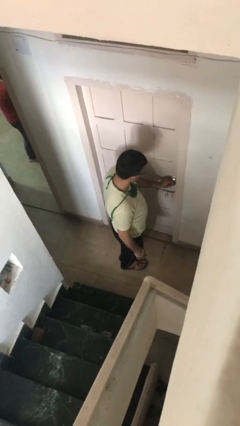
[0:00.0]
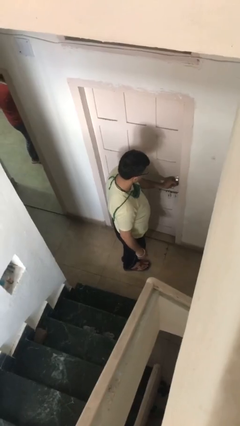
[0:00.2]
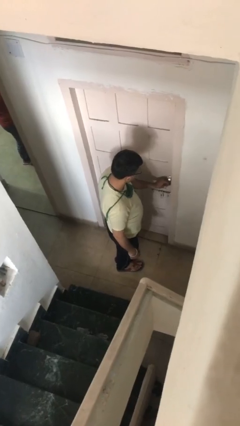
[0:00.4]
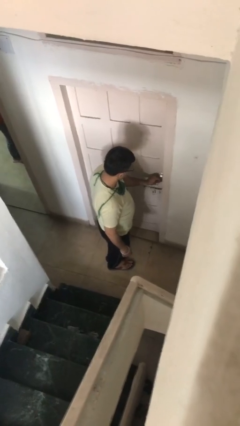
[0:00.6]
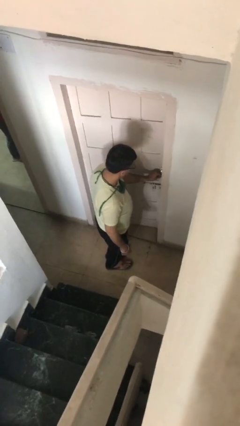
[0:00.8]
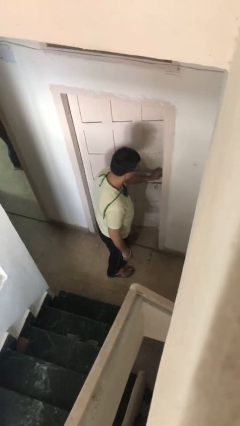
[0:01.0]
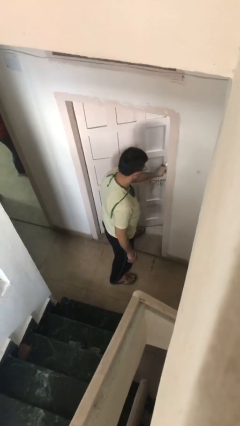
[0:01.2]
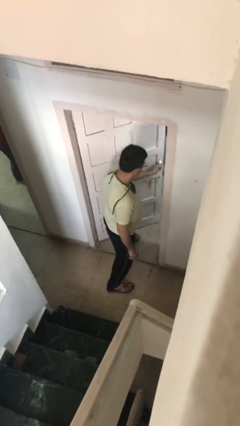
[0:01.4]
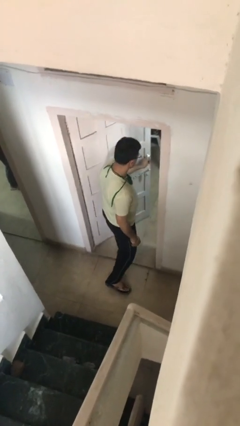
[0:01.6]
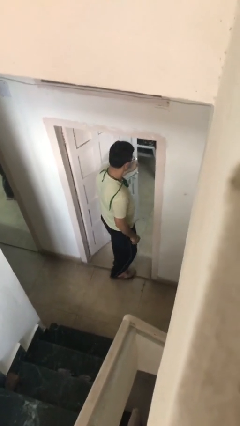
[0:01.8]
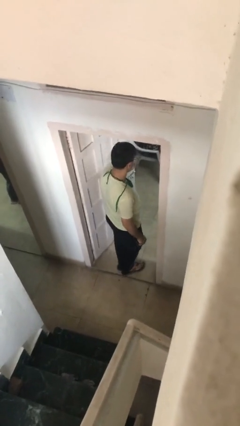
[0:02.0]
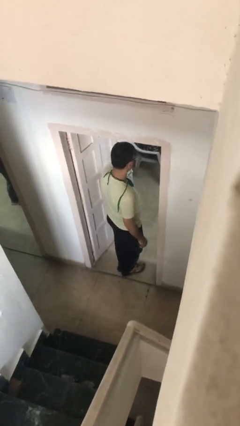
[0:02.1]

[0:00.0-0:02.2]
person opens facility door

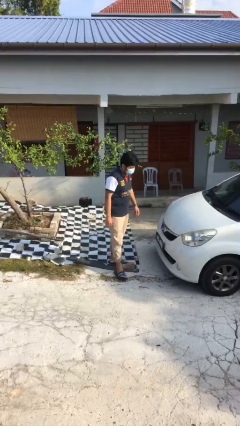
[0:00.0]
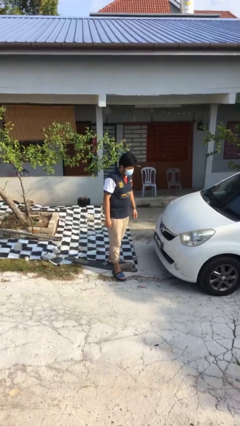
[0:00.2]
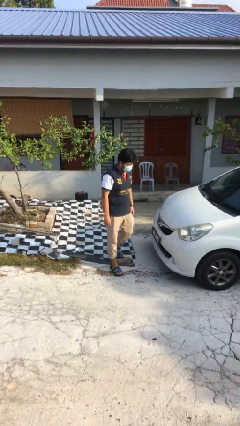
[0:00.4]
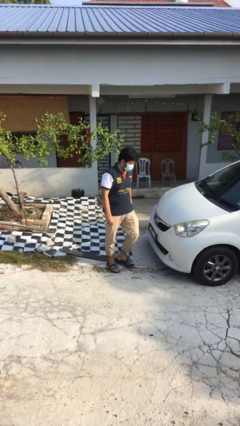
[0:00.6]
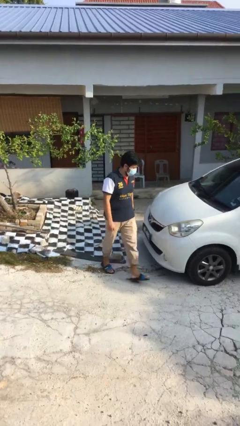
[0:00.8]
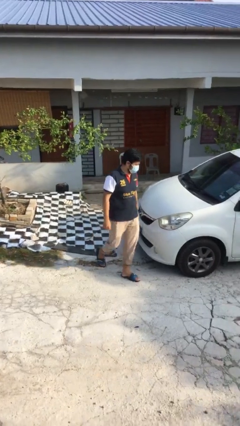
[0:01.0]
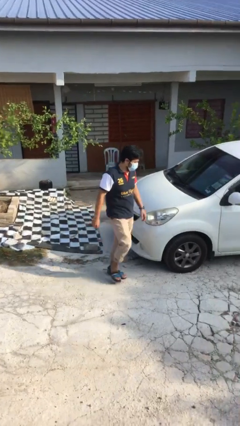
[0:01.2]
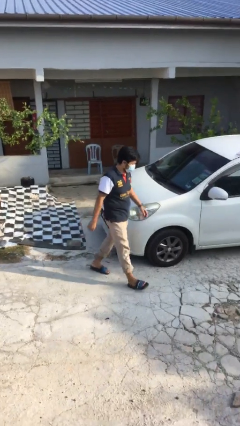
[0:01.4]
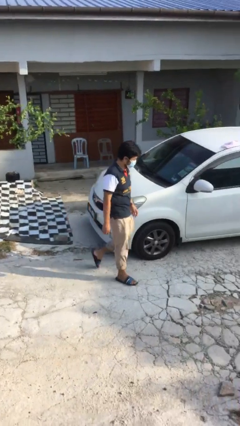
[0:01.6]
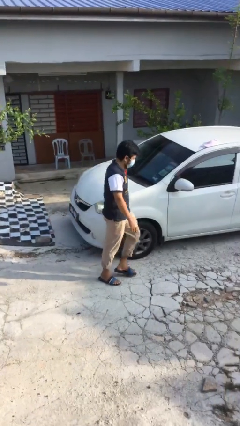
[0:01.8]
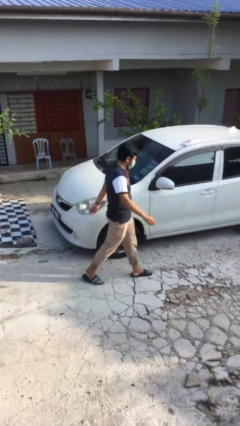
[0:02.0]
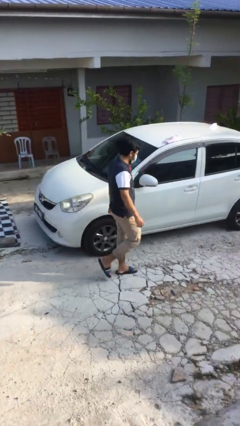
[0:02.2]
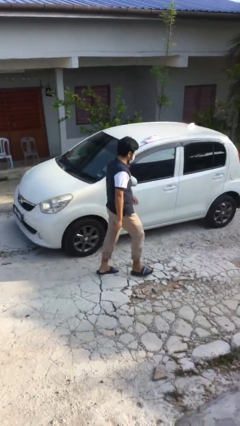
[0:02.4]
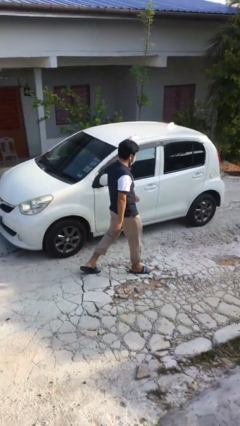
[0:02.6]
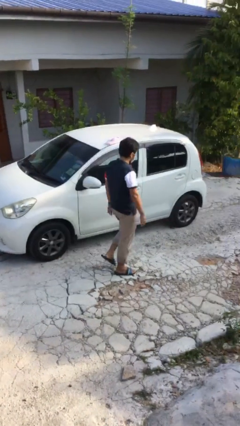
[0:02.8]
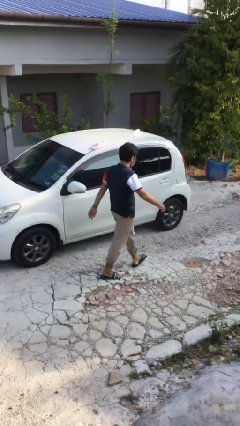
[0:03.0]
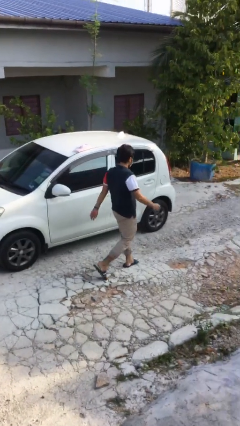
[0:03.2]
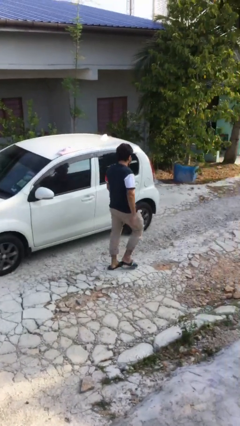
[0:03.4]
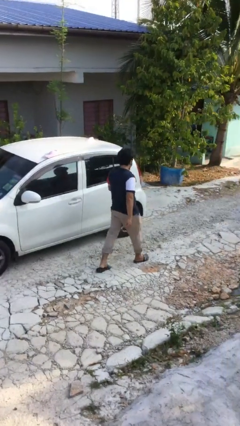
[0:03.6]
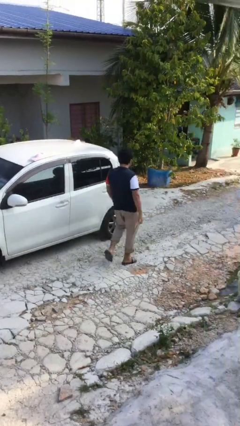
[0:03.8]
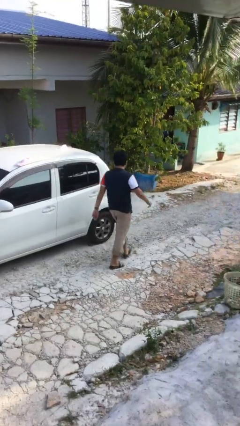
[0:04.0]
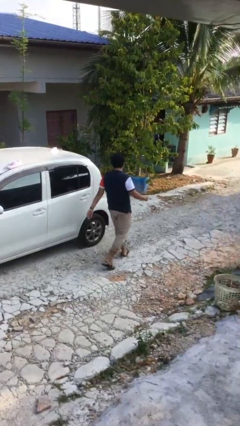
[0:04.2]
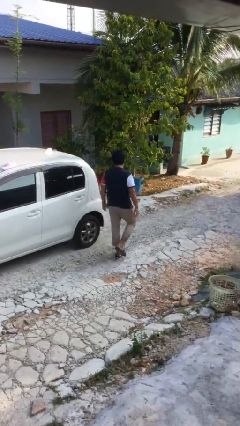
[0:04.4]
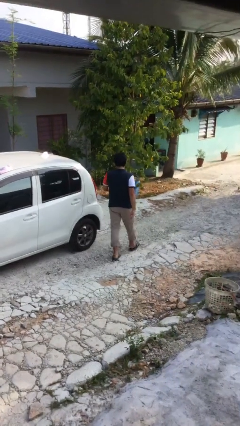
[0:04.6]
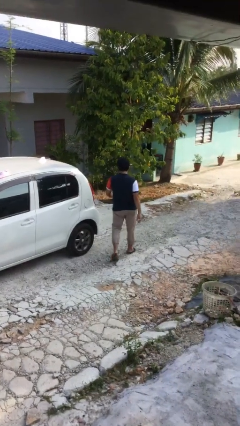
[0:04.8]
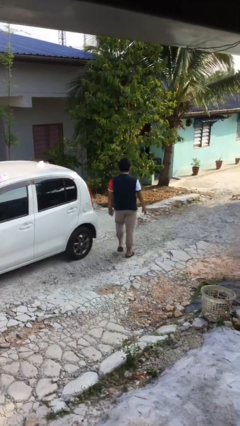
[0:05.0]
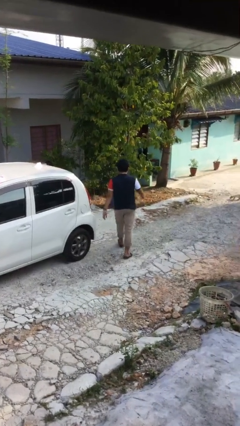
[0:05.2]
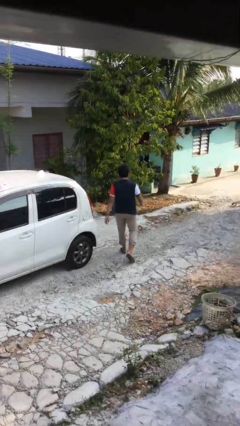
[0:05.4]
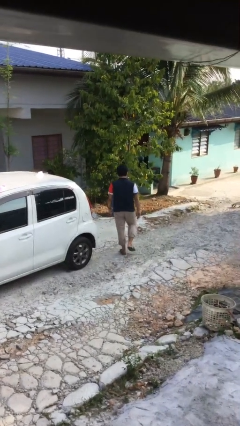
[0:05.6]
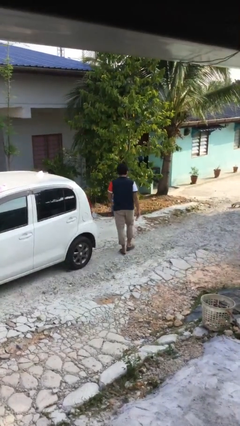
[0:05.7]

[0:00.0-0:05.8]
person walks around car

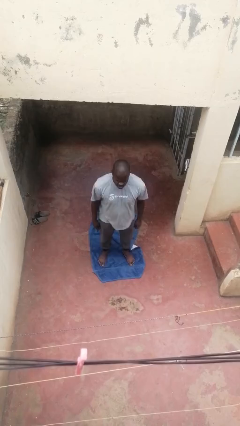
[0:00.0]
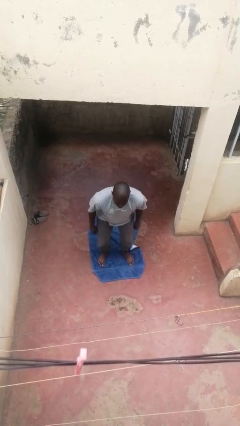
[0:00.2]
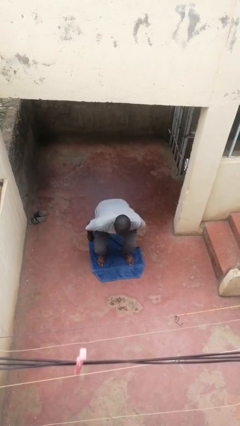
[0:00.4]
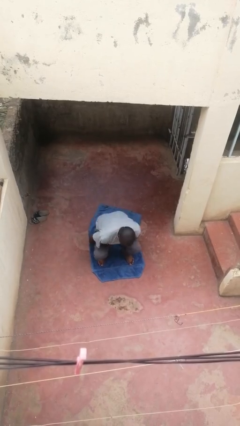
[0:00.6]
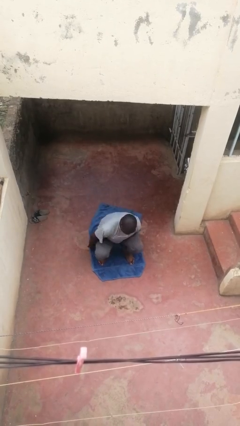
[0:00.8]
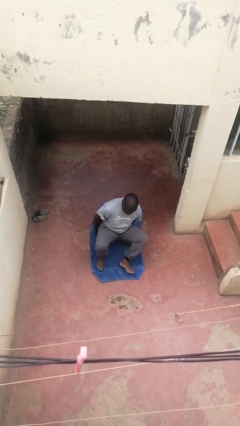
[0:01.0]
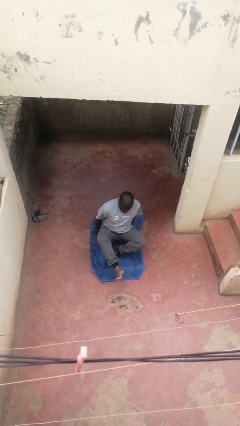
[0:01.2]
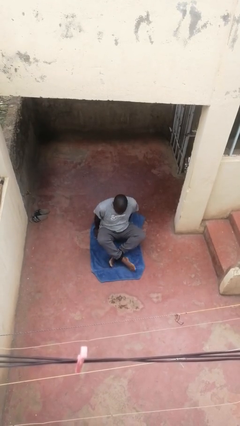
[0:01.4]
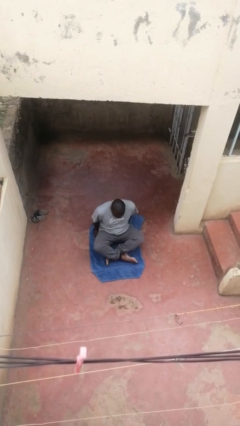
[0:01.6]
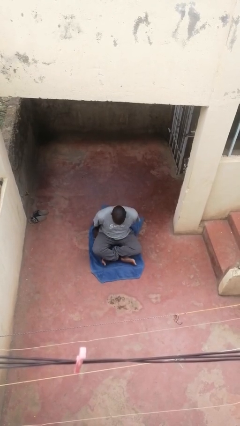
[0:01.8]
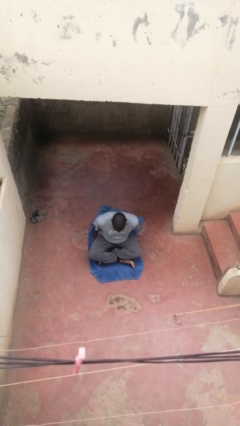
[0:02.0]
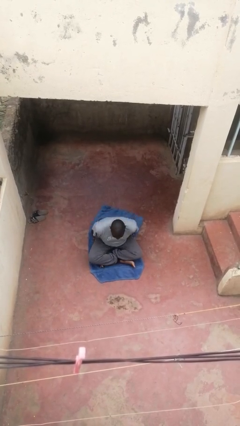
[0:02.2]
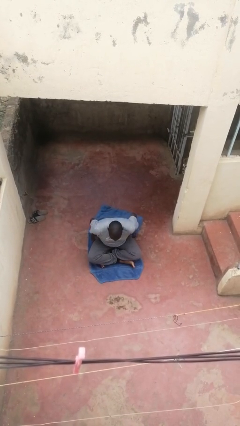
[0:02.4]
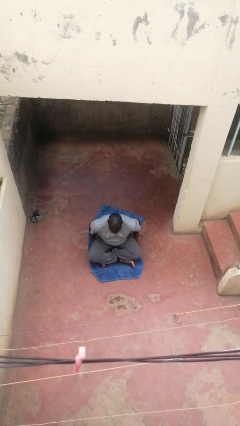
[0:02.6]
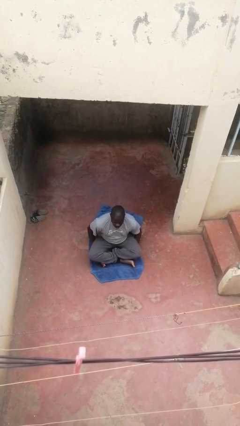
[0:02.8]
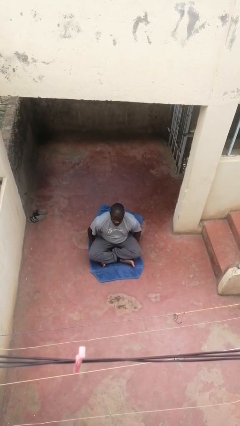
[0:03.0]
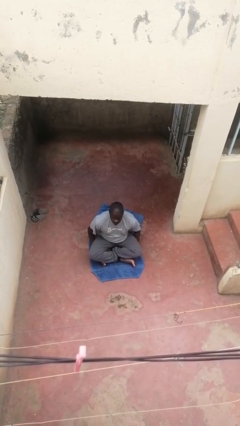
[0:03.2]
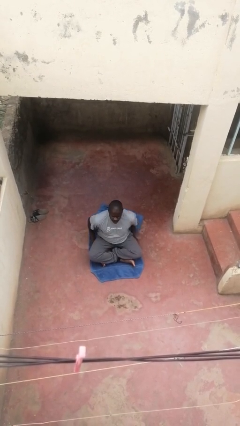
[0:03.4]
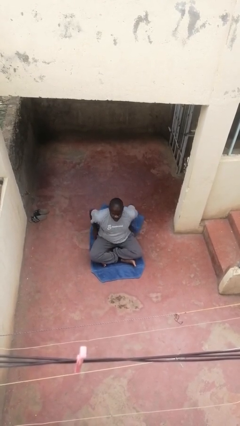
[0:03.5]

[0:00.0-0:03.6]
person sits crisscross

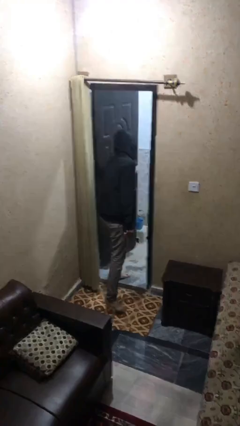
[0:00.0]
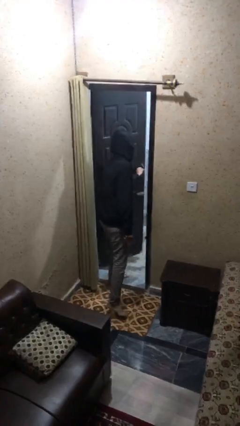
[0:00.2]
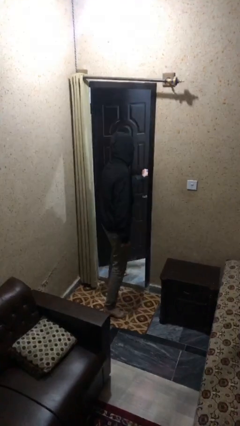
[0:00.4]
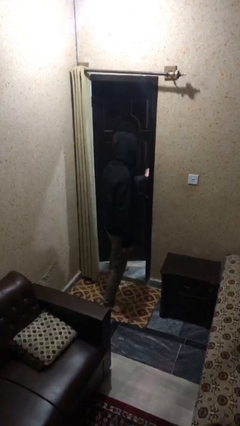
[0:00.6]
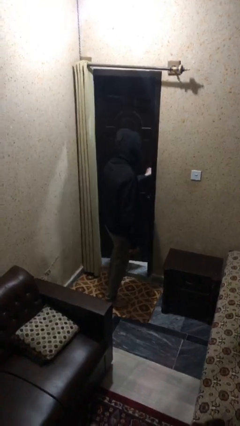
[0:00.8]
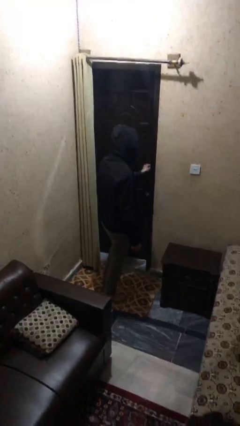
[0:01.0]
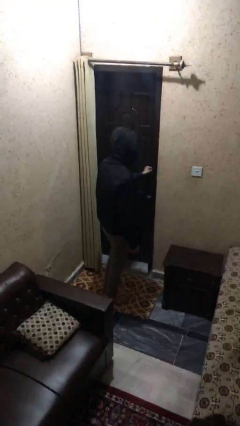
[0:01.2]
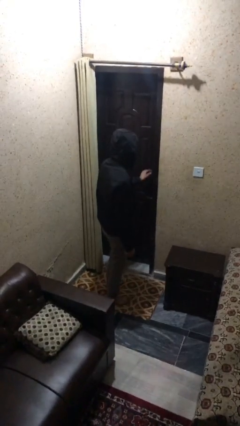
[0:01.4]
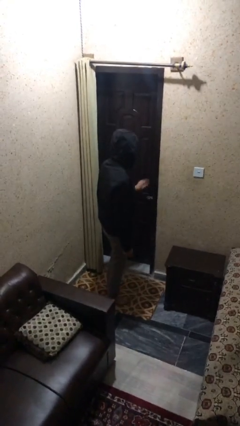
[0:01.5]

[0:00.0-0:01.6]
person closes facility door

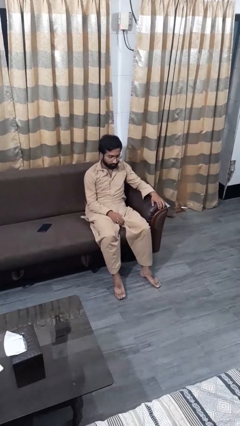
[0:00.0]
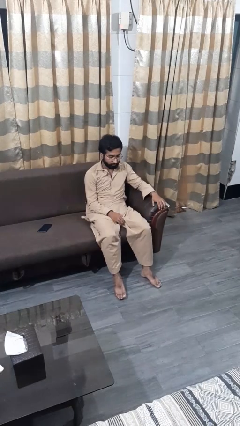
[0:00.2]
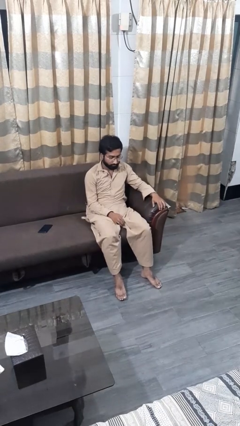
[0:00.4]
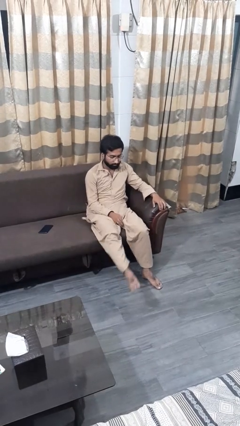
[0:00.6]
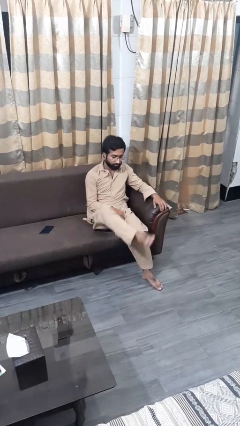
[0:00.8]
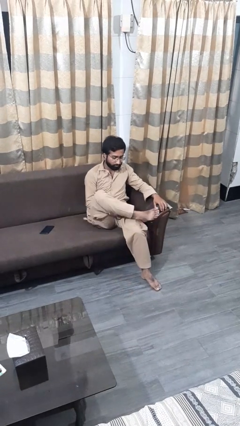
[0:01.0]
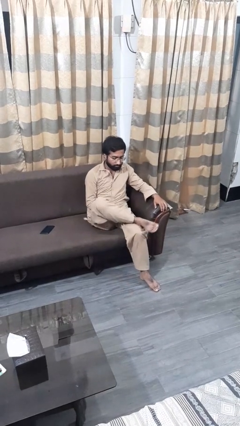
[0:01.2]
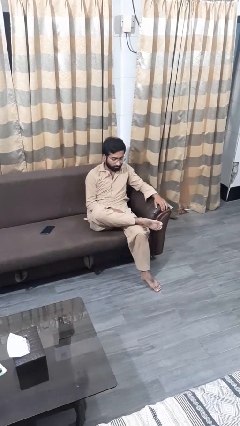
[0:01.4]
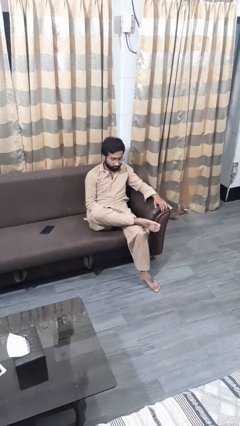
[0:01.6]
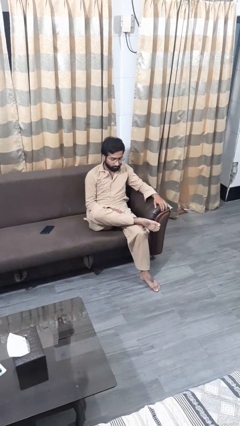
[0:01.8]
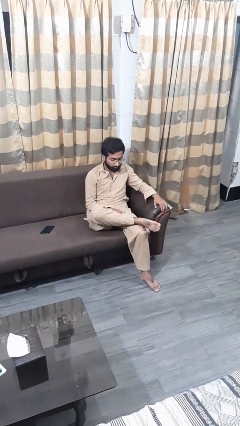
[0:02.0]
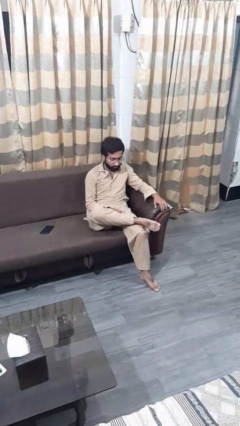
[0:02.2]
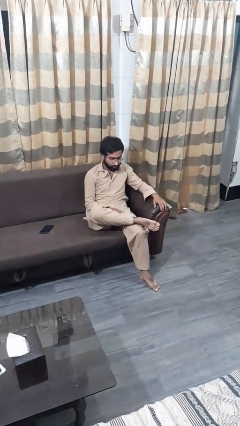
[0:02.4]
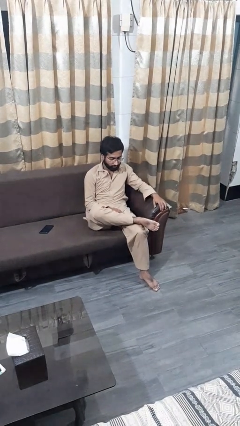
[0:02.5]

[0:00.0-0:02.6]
person crosses legs

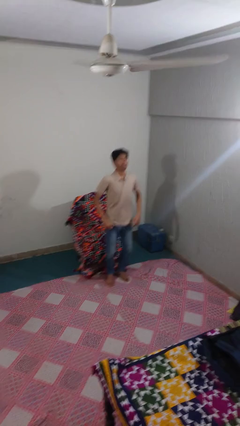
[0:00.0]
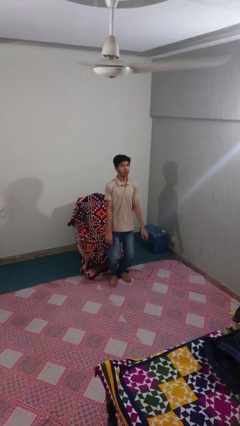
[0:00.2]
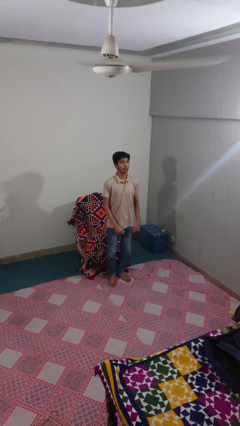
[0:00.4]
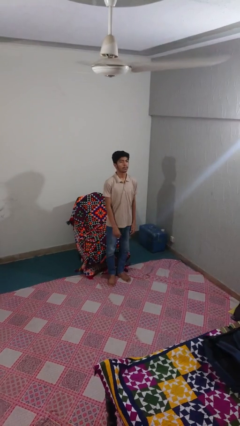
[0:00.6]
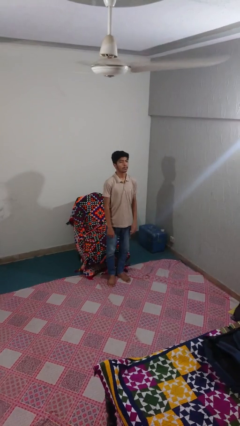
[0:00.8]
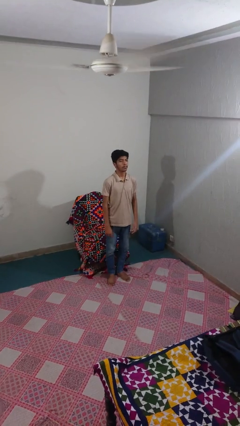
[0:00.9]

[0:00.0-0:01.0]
person jumps

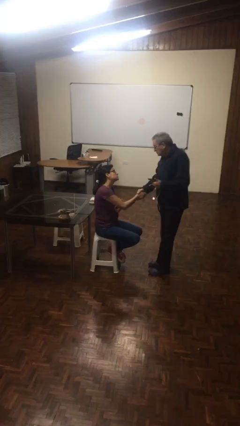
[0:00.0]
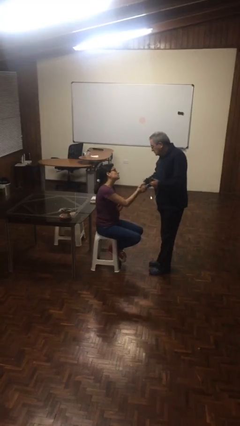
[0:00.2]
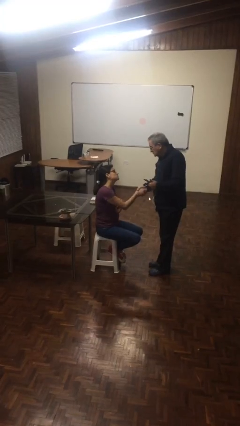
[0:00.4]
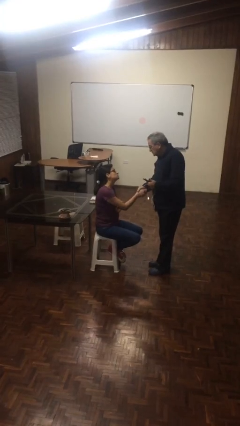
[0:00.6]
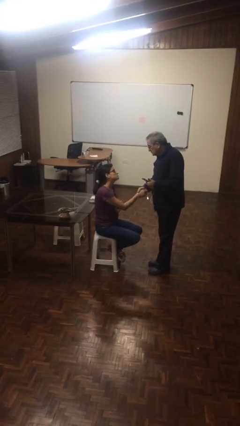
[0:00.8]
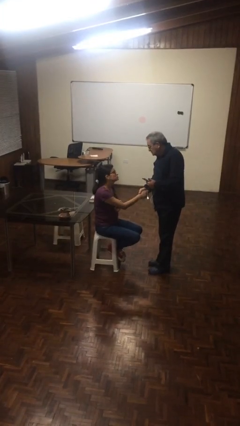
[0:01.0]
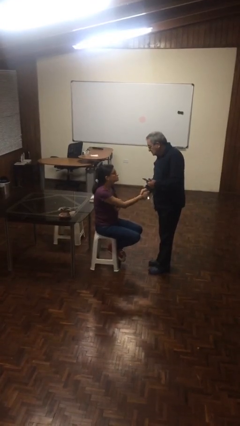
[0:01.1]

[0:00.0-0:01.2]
person shakes hand
